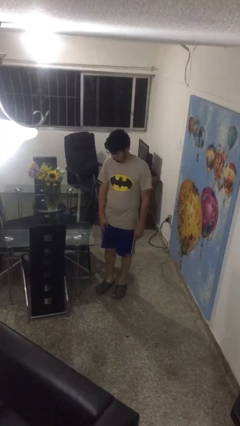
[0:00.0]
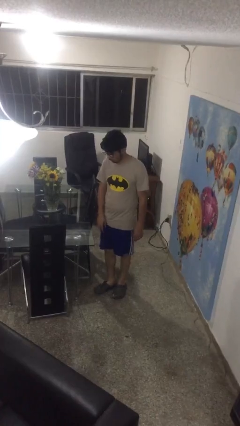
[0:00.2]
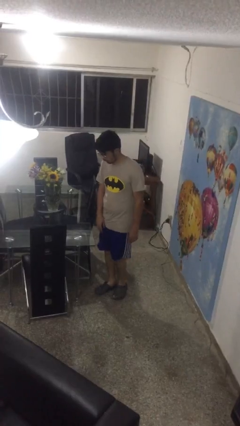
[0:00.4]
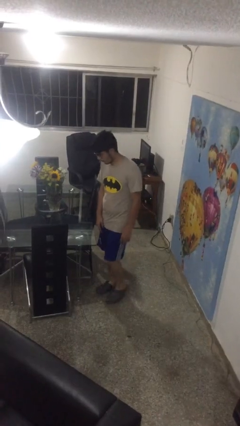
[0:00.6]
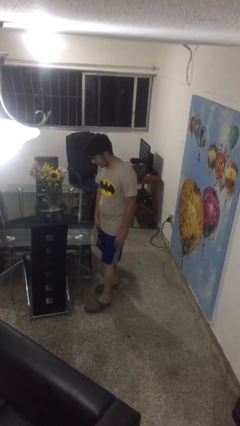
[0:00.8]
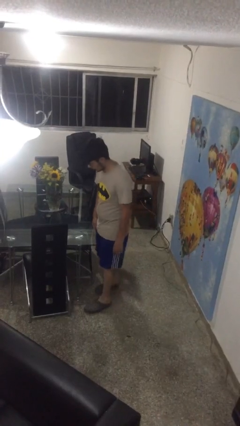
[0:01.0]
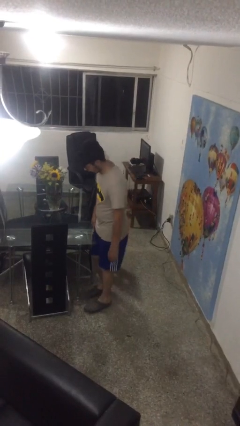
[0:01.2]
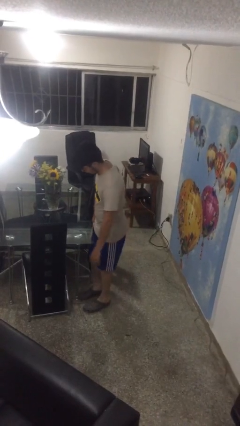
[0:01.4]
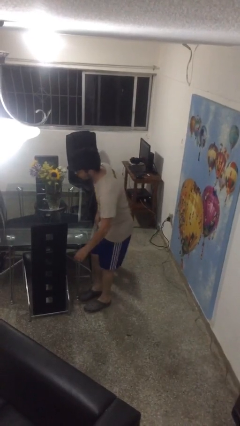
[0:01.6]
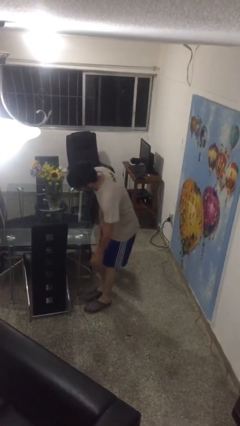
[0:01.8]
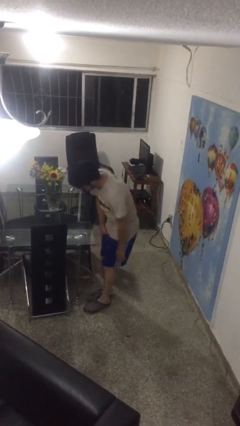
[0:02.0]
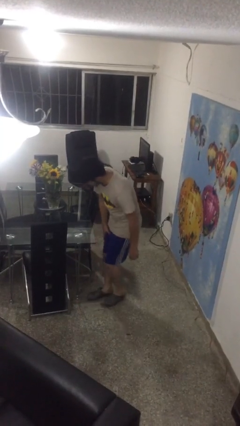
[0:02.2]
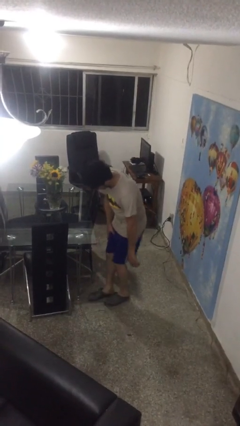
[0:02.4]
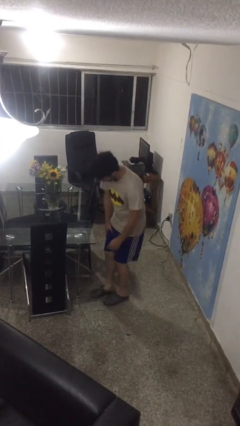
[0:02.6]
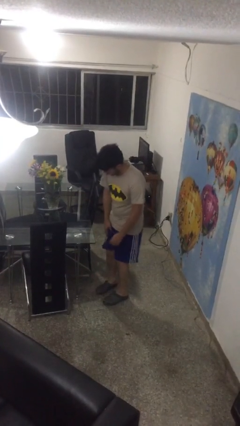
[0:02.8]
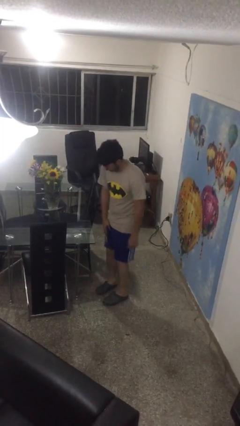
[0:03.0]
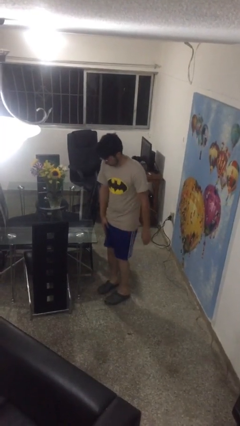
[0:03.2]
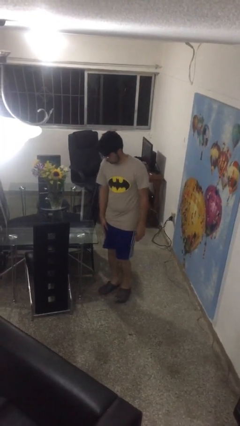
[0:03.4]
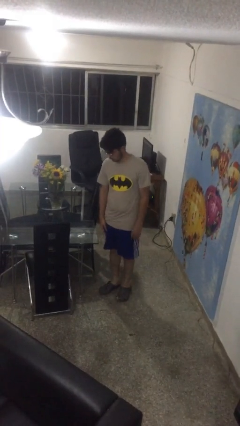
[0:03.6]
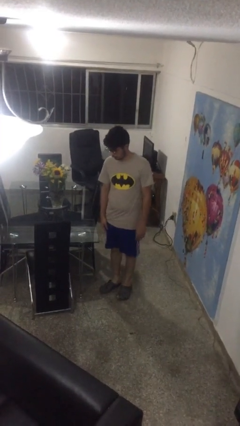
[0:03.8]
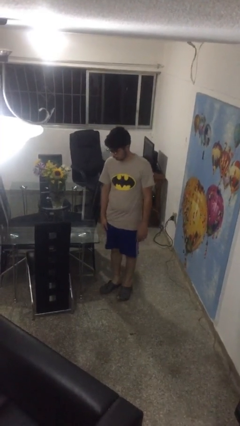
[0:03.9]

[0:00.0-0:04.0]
person bumps into table

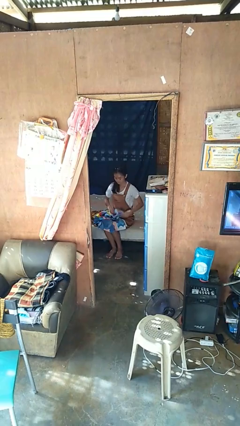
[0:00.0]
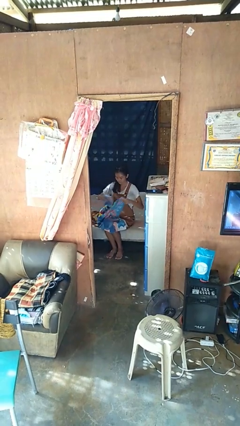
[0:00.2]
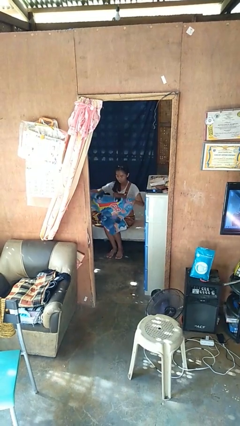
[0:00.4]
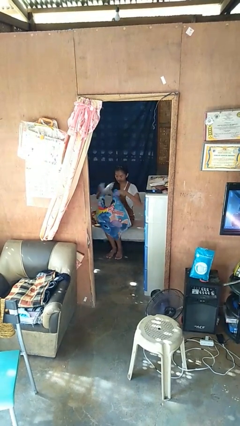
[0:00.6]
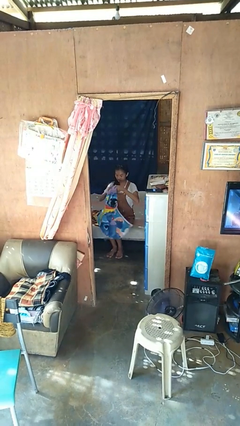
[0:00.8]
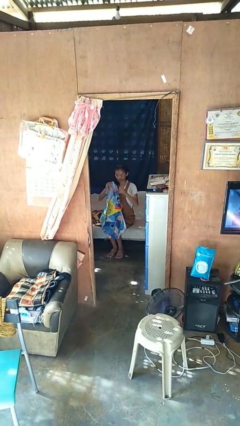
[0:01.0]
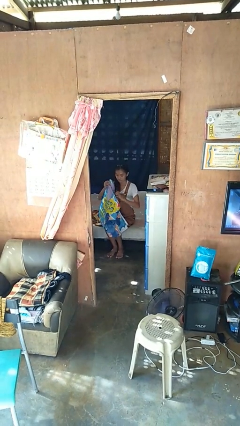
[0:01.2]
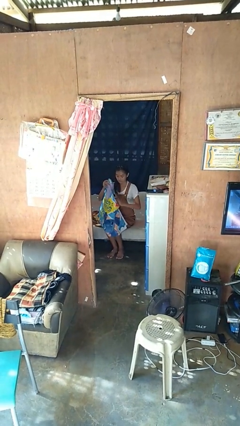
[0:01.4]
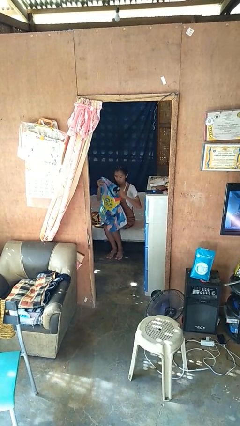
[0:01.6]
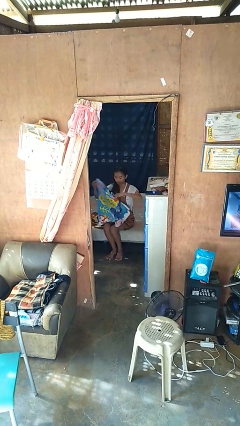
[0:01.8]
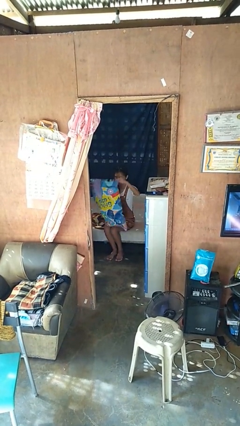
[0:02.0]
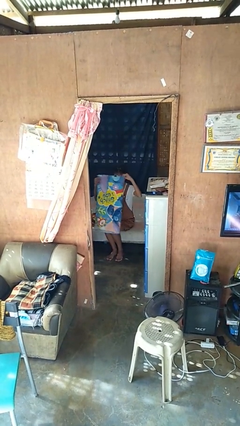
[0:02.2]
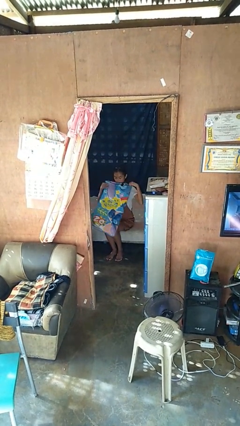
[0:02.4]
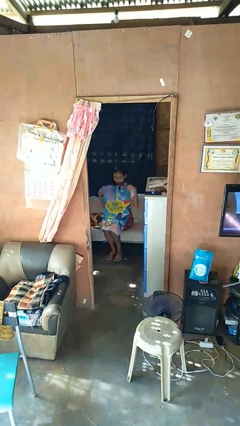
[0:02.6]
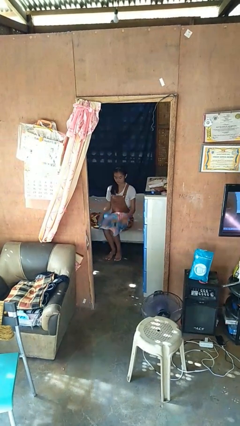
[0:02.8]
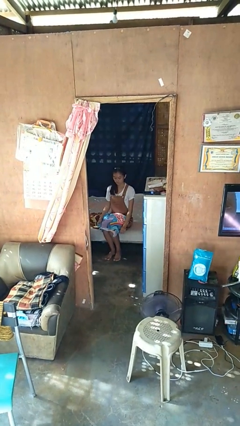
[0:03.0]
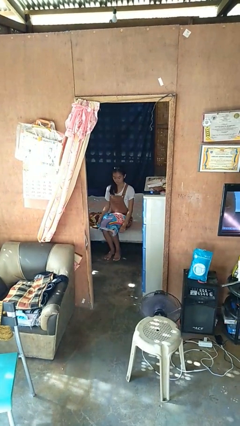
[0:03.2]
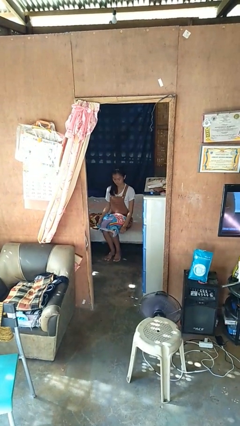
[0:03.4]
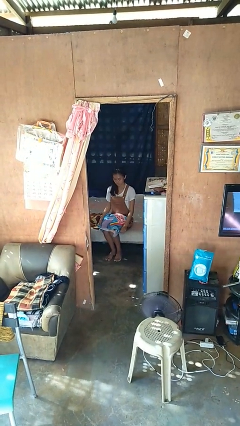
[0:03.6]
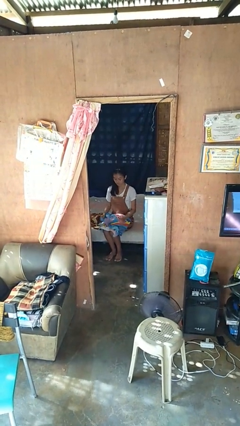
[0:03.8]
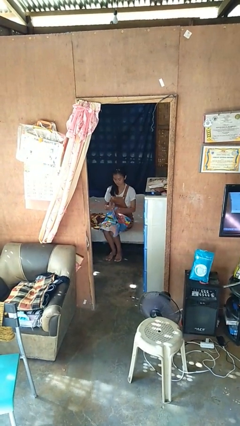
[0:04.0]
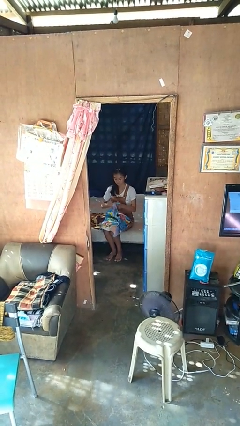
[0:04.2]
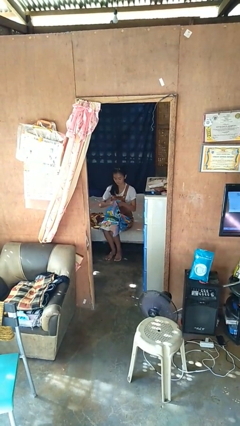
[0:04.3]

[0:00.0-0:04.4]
person folds blanket

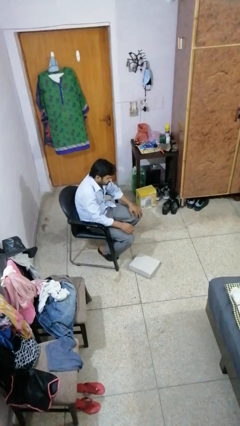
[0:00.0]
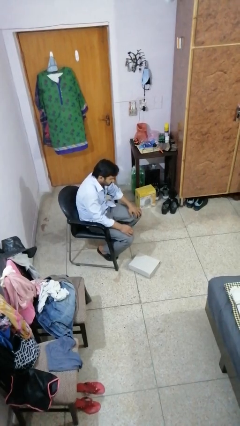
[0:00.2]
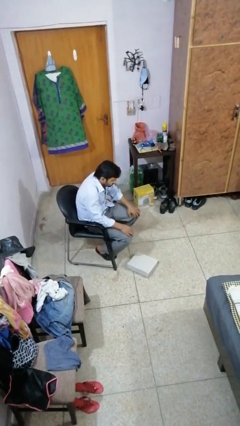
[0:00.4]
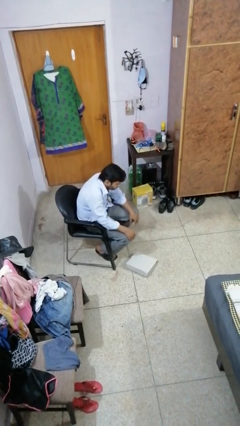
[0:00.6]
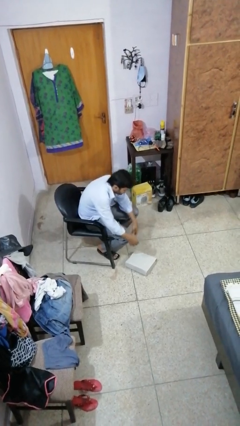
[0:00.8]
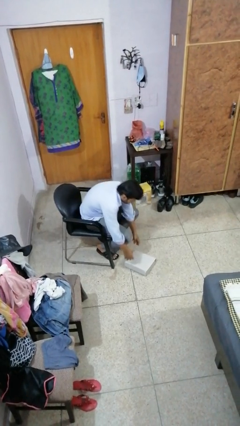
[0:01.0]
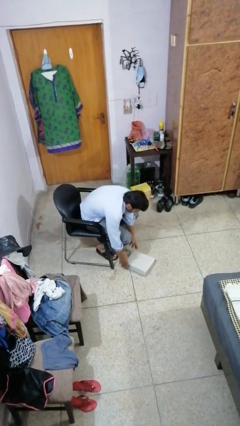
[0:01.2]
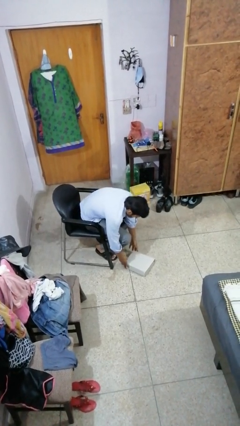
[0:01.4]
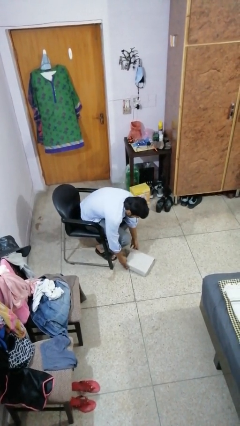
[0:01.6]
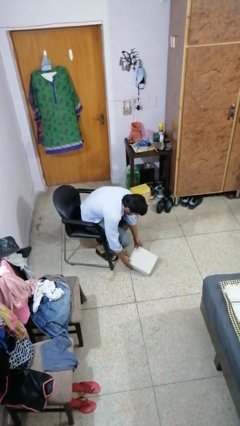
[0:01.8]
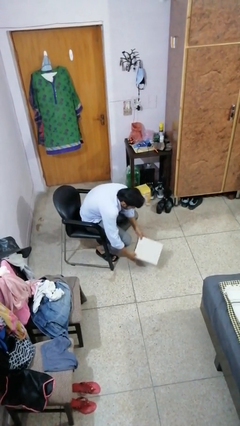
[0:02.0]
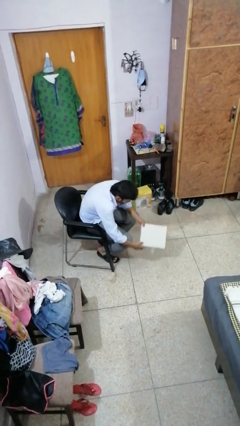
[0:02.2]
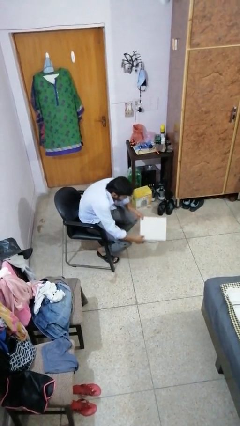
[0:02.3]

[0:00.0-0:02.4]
person picks up object from floor

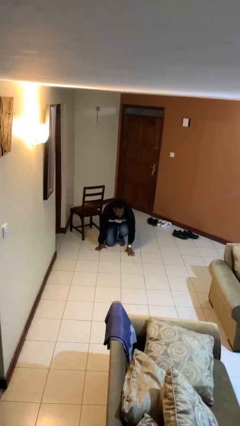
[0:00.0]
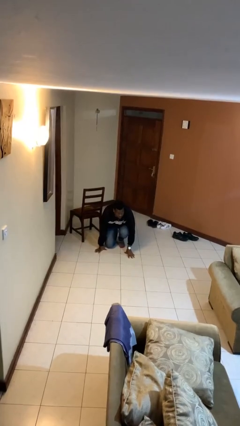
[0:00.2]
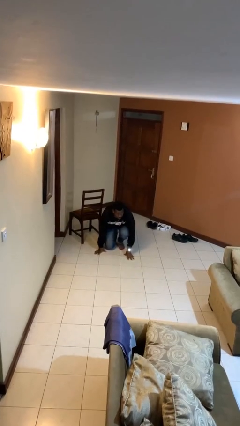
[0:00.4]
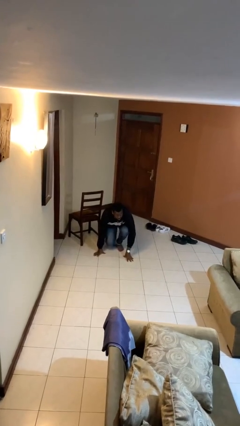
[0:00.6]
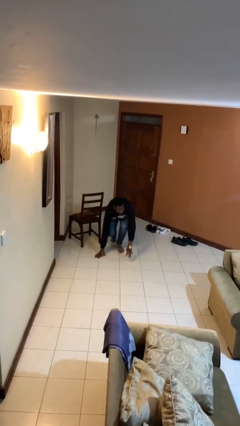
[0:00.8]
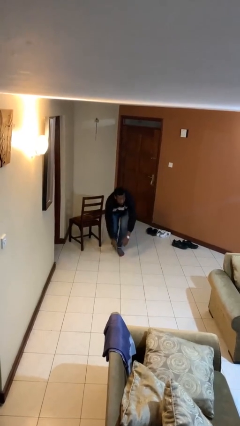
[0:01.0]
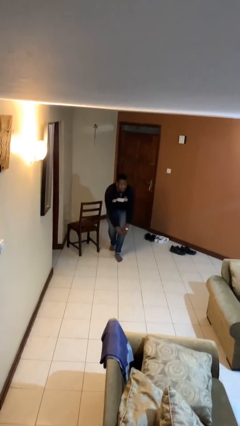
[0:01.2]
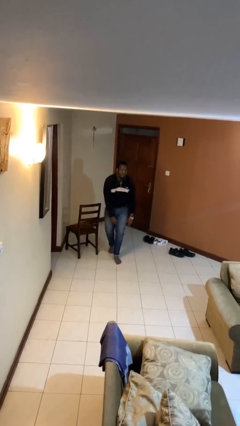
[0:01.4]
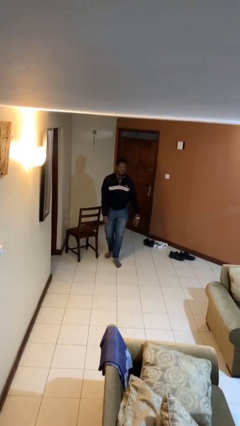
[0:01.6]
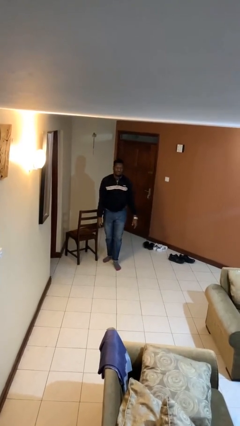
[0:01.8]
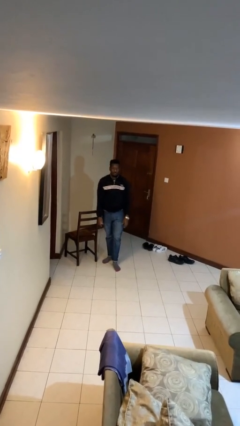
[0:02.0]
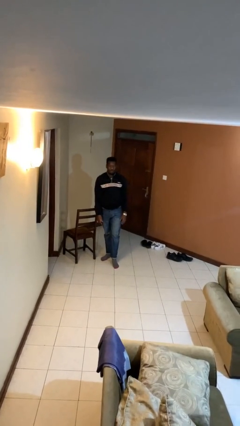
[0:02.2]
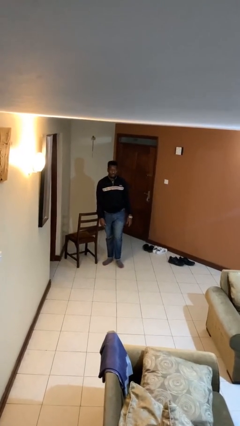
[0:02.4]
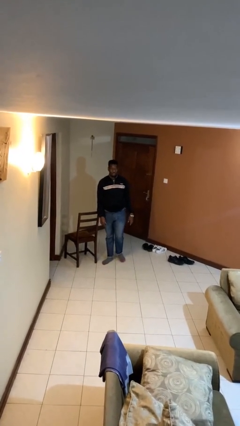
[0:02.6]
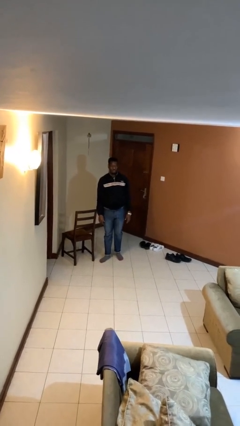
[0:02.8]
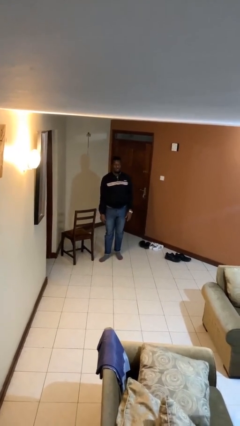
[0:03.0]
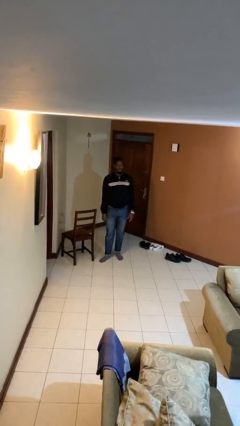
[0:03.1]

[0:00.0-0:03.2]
person stands up from floor

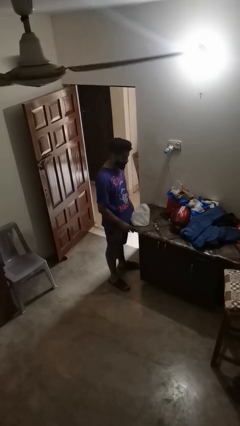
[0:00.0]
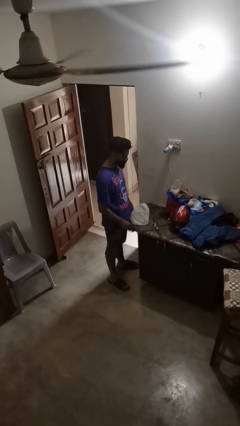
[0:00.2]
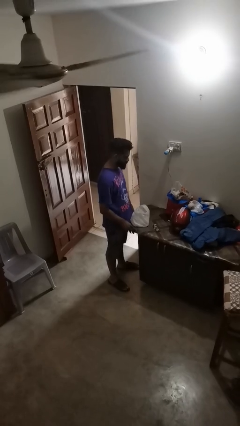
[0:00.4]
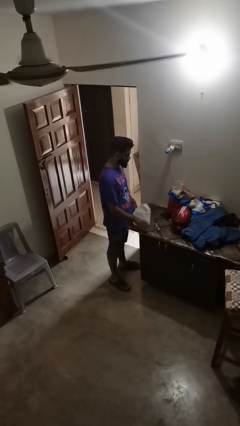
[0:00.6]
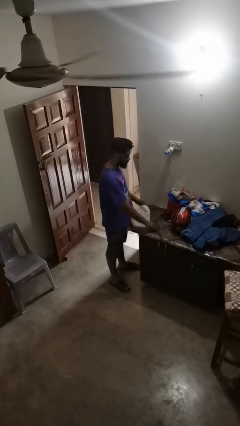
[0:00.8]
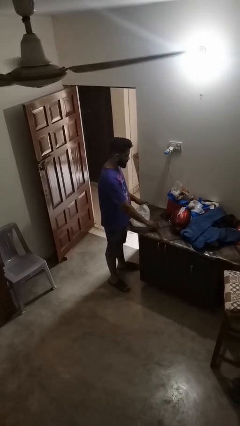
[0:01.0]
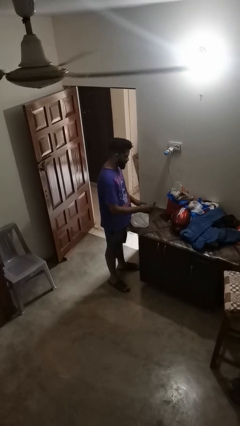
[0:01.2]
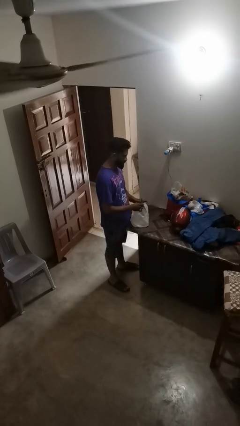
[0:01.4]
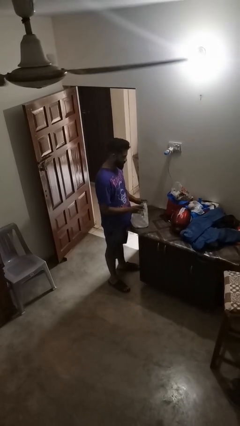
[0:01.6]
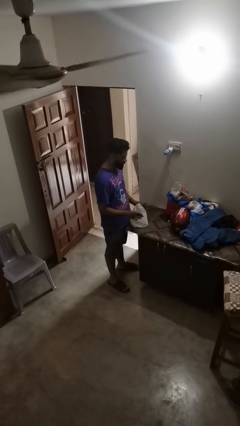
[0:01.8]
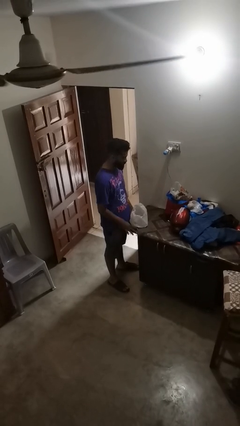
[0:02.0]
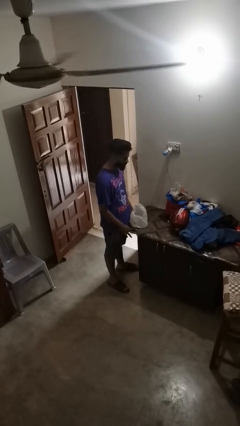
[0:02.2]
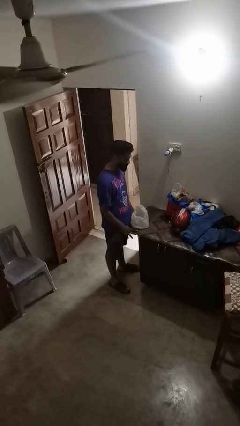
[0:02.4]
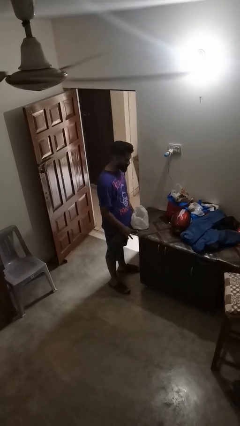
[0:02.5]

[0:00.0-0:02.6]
person puts object into bag

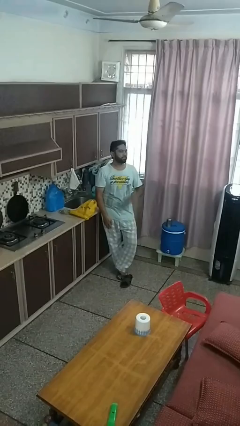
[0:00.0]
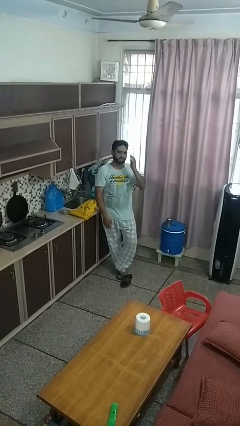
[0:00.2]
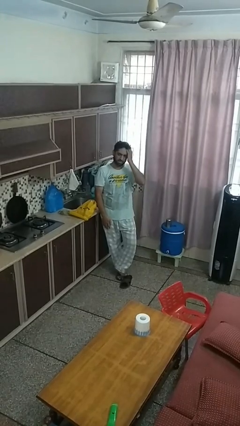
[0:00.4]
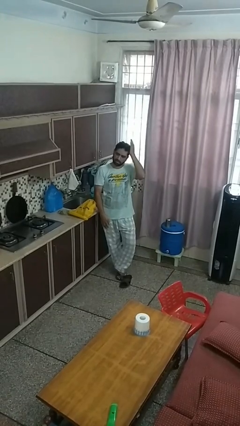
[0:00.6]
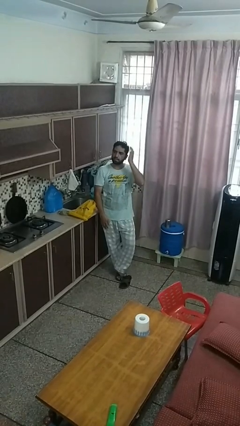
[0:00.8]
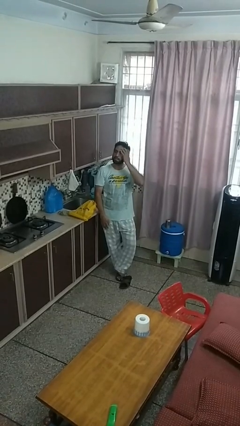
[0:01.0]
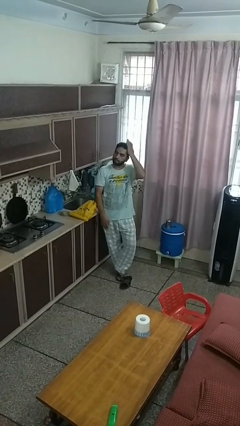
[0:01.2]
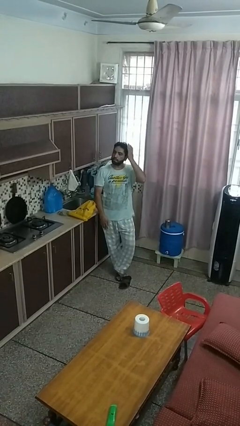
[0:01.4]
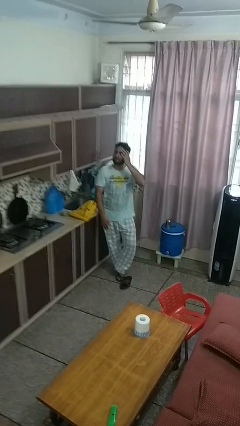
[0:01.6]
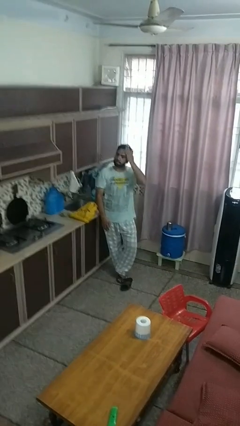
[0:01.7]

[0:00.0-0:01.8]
person strokes hair
